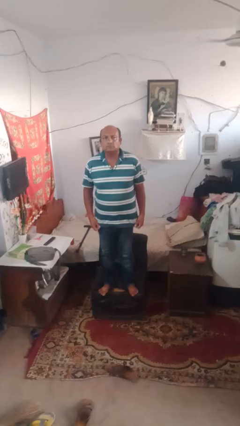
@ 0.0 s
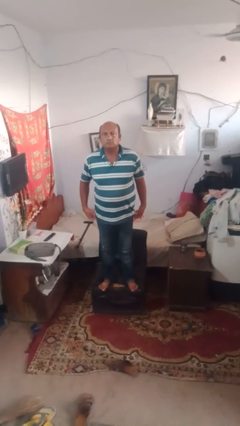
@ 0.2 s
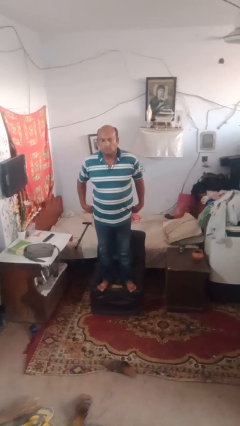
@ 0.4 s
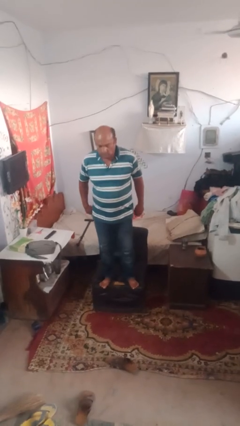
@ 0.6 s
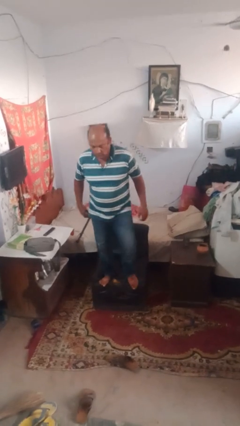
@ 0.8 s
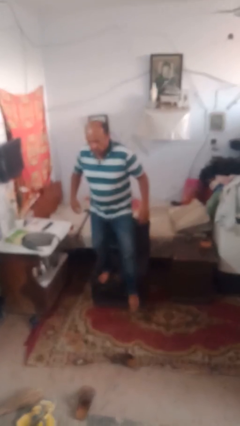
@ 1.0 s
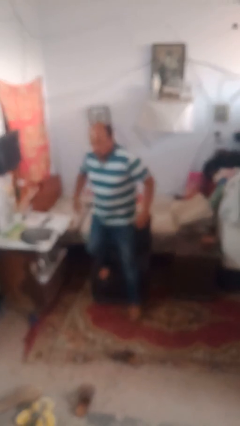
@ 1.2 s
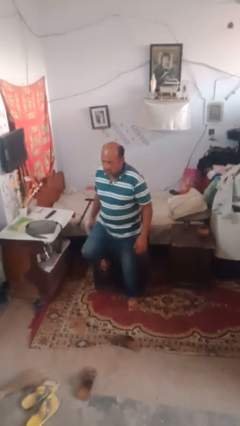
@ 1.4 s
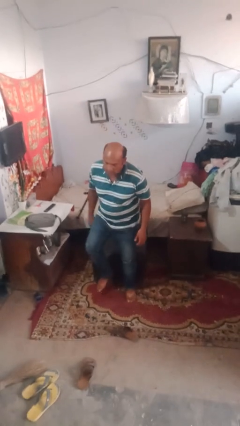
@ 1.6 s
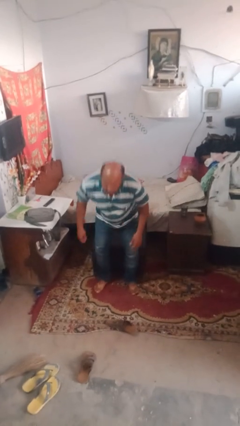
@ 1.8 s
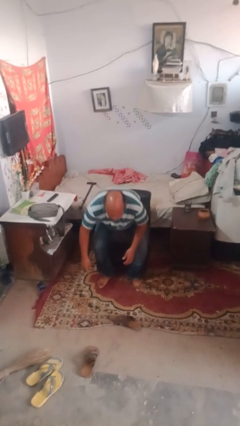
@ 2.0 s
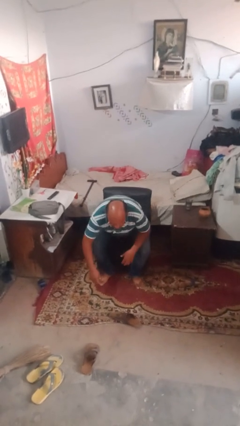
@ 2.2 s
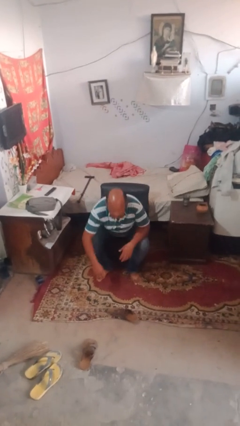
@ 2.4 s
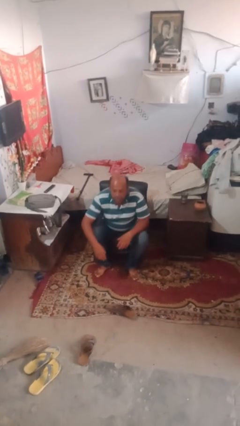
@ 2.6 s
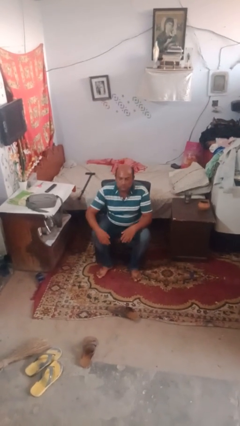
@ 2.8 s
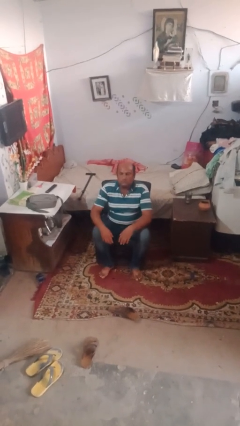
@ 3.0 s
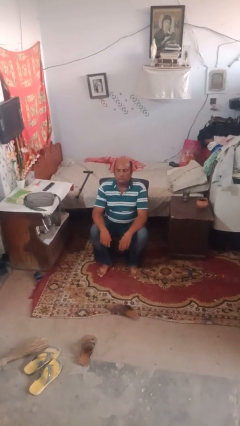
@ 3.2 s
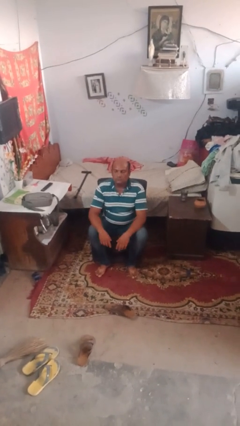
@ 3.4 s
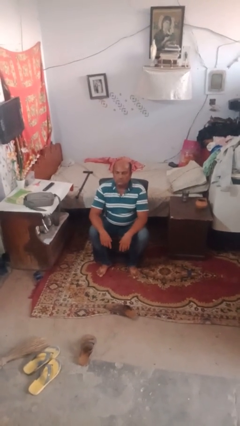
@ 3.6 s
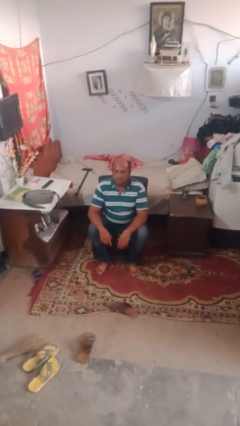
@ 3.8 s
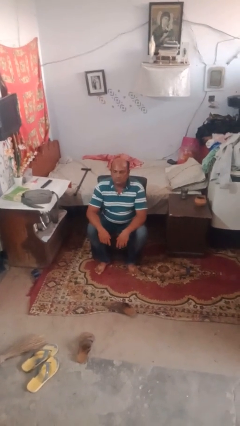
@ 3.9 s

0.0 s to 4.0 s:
person lies down on couch

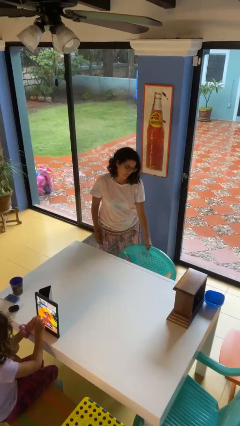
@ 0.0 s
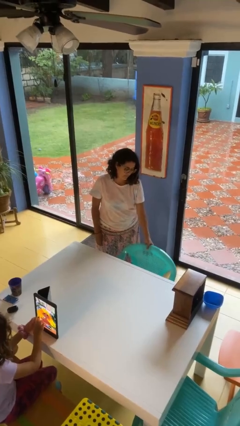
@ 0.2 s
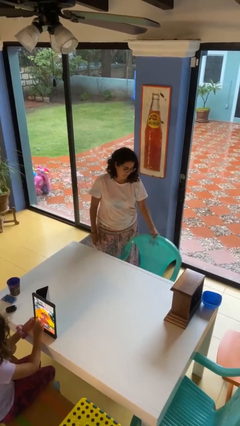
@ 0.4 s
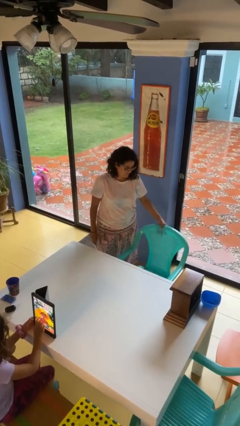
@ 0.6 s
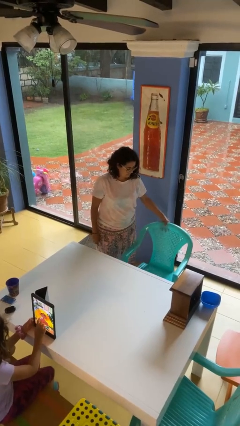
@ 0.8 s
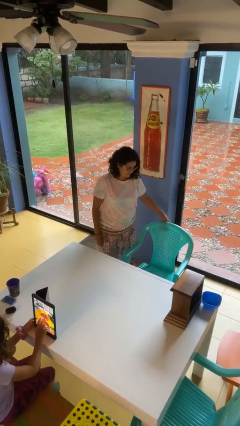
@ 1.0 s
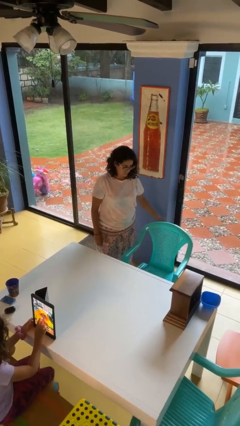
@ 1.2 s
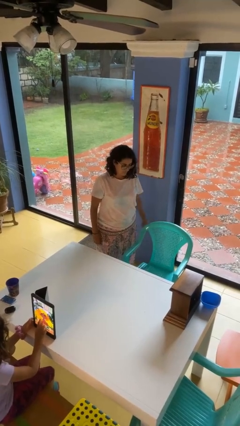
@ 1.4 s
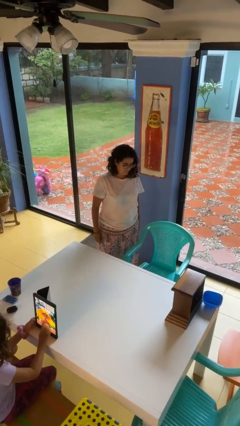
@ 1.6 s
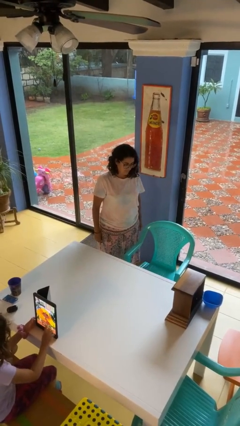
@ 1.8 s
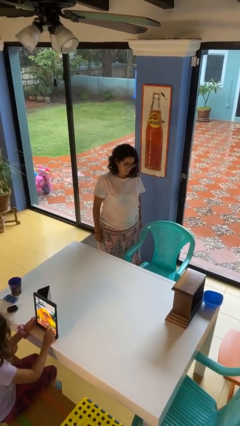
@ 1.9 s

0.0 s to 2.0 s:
person pulls out chair

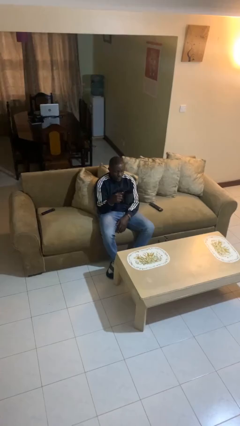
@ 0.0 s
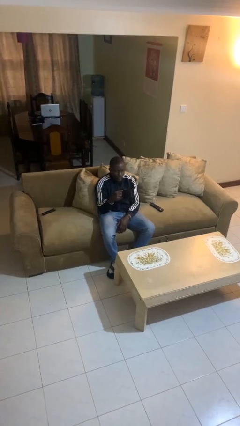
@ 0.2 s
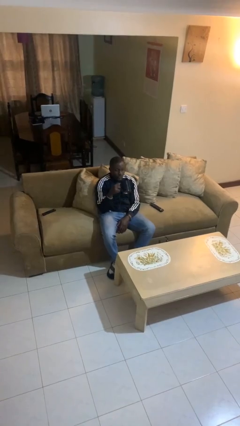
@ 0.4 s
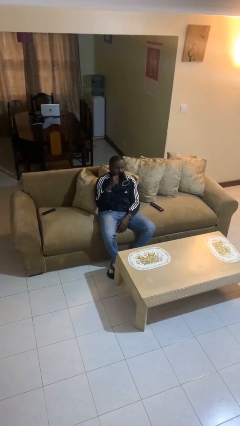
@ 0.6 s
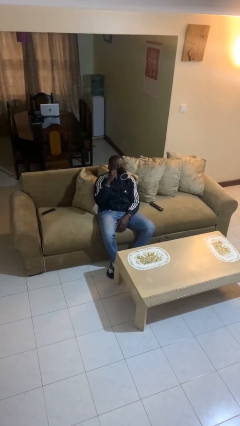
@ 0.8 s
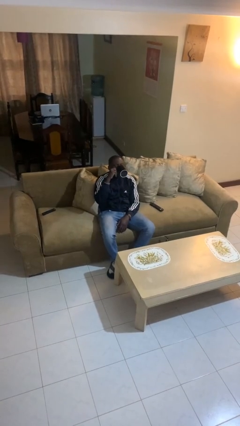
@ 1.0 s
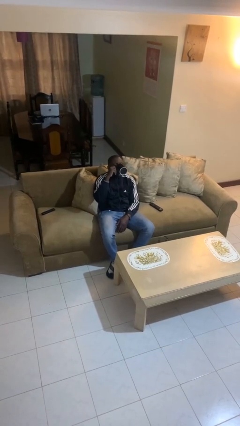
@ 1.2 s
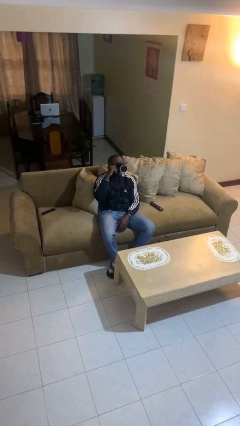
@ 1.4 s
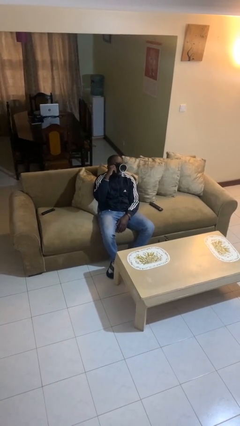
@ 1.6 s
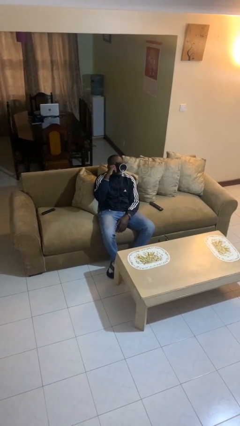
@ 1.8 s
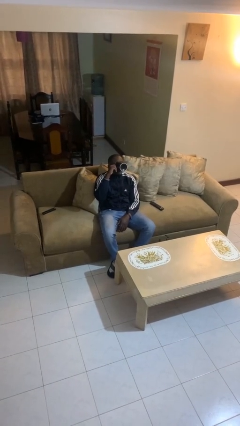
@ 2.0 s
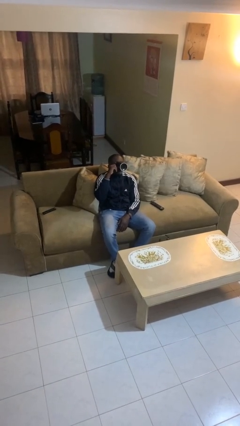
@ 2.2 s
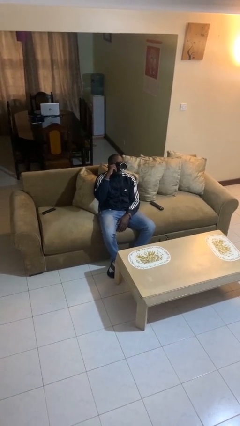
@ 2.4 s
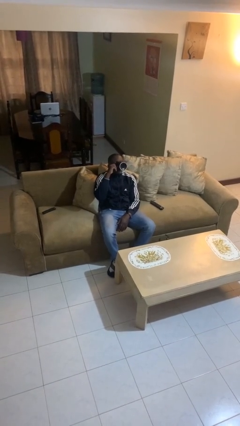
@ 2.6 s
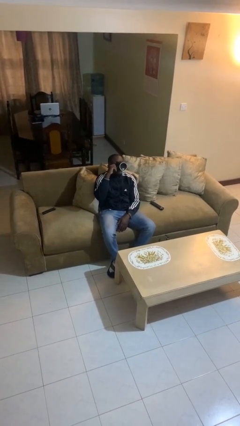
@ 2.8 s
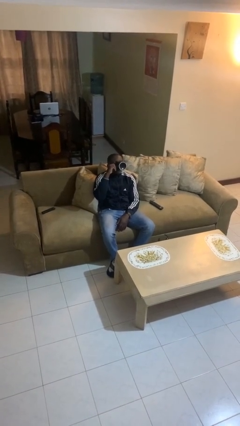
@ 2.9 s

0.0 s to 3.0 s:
person drinks from mug

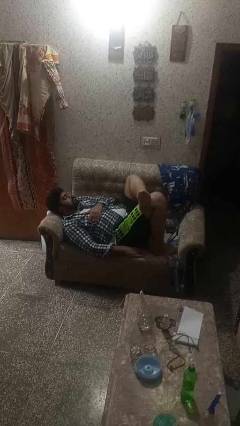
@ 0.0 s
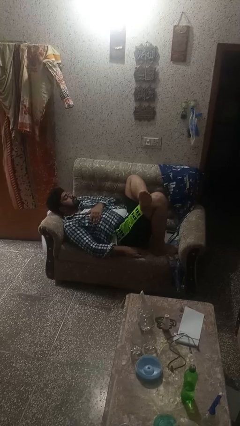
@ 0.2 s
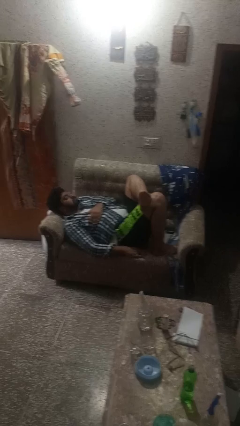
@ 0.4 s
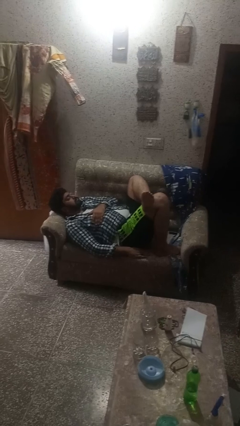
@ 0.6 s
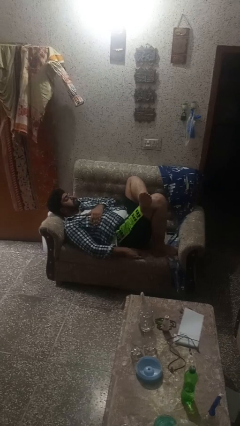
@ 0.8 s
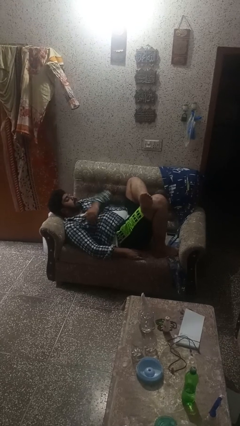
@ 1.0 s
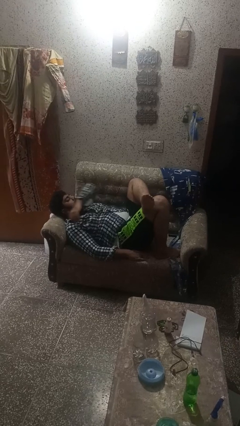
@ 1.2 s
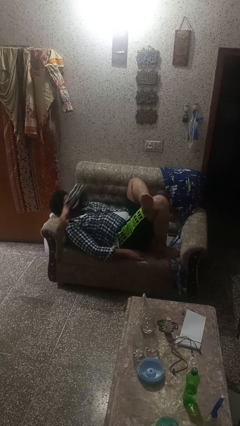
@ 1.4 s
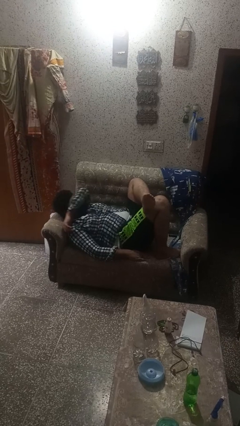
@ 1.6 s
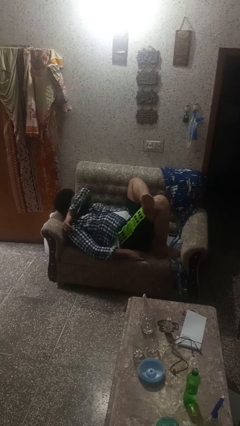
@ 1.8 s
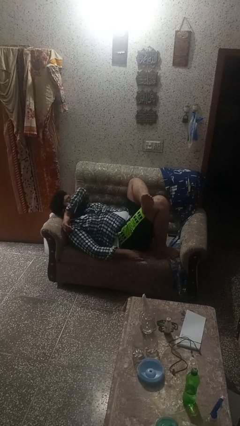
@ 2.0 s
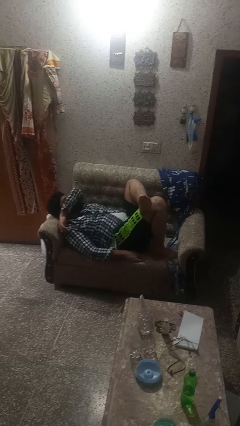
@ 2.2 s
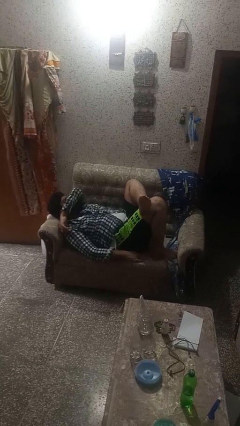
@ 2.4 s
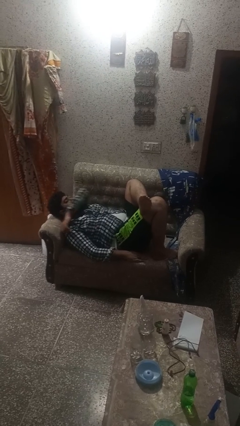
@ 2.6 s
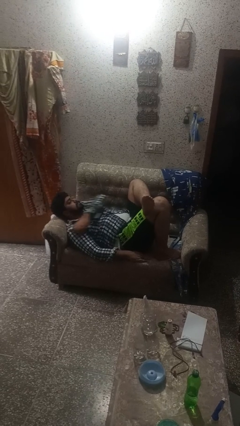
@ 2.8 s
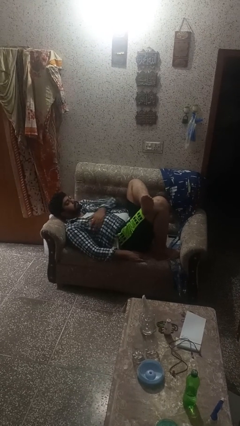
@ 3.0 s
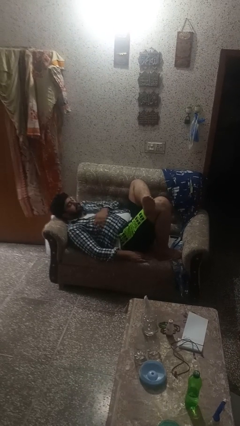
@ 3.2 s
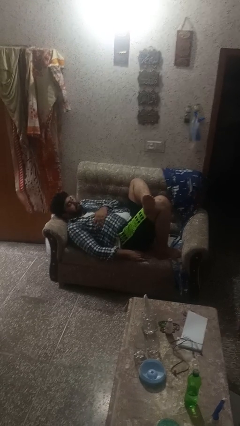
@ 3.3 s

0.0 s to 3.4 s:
person sneezes into arm

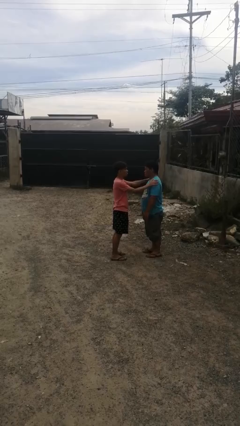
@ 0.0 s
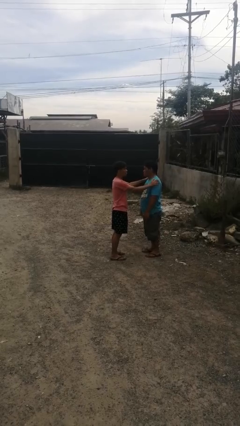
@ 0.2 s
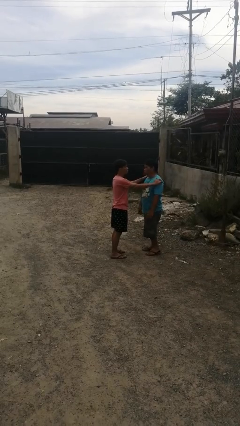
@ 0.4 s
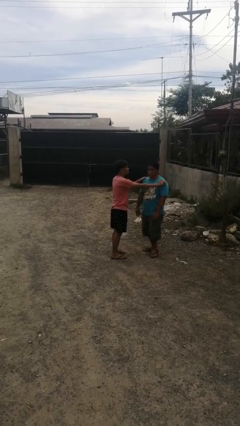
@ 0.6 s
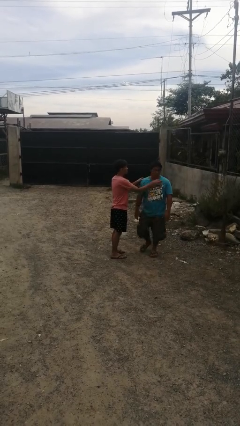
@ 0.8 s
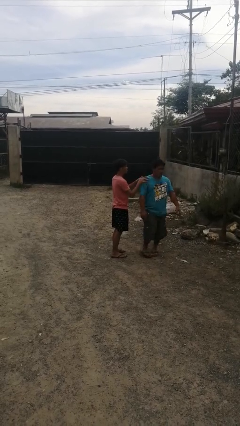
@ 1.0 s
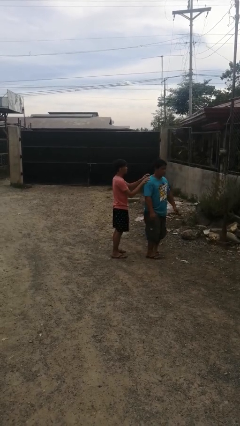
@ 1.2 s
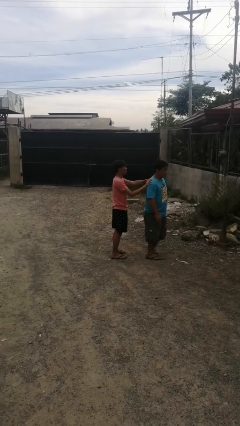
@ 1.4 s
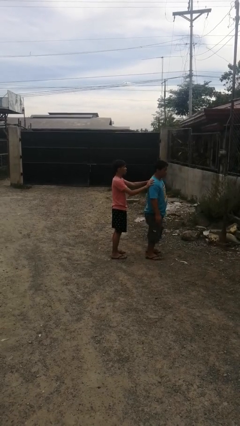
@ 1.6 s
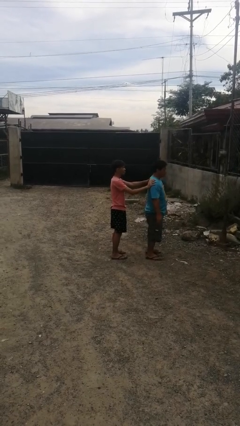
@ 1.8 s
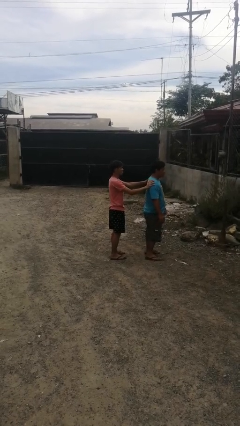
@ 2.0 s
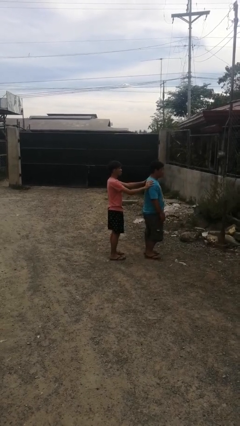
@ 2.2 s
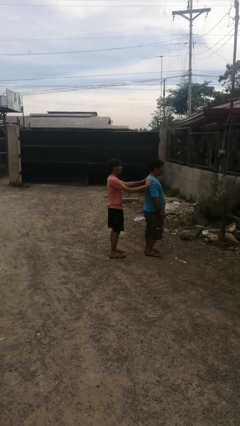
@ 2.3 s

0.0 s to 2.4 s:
person spins person around

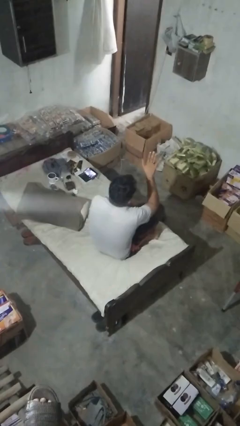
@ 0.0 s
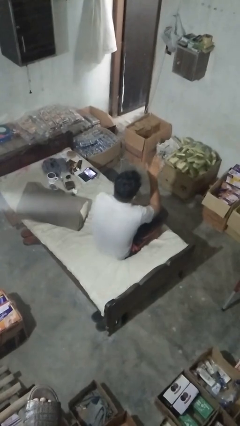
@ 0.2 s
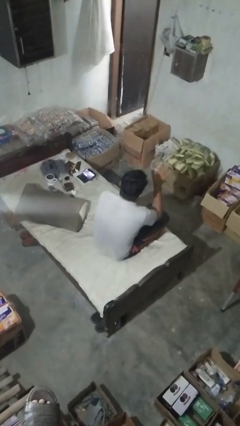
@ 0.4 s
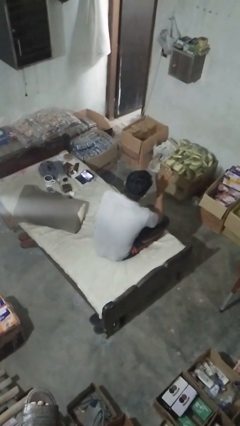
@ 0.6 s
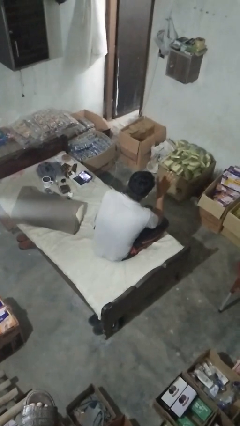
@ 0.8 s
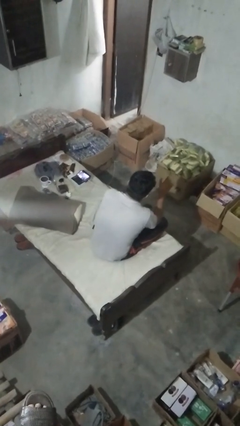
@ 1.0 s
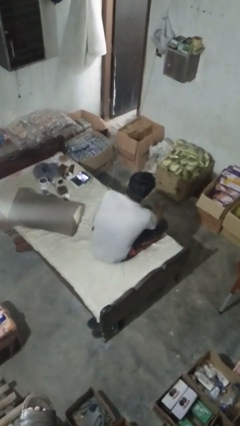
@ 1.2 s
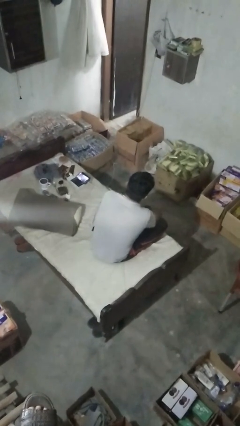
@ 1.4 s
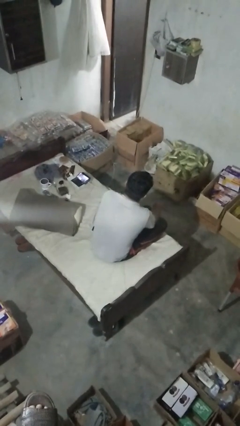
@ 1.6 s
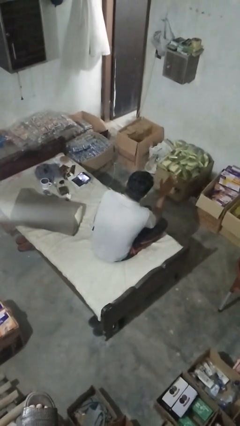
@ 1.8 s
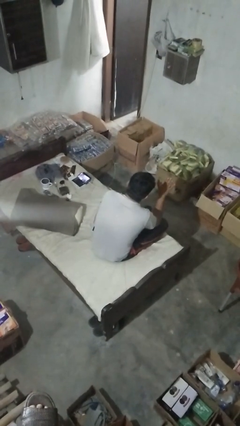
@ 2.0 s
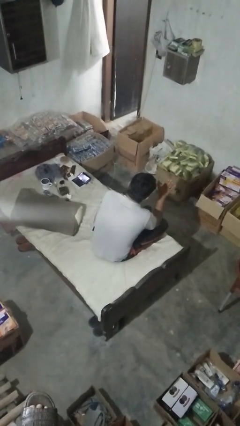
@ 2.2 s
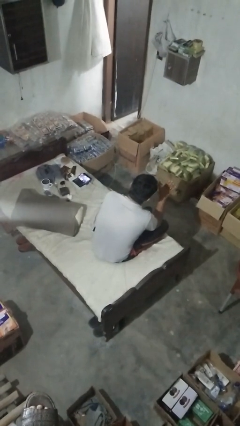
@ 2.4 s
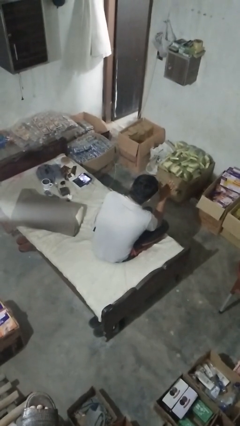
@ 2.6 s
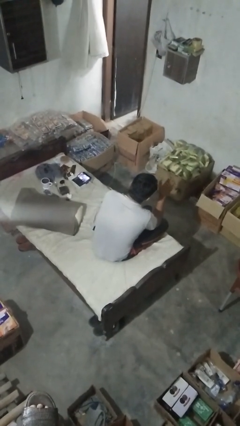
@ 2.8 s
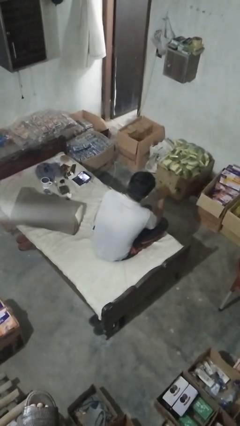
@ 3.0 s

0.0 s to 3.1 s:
person gestures stop
